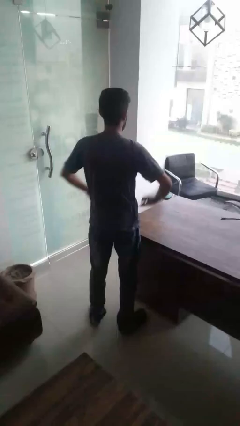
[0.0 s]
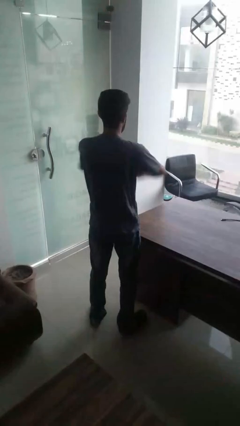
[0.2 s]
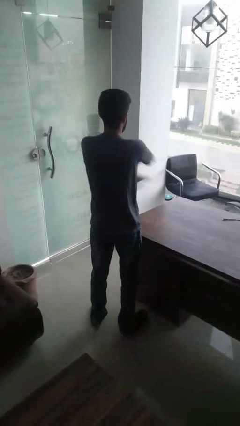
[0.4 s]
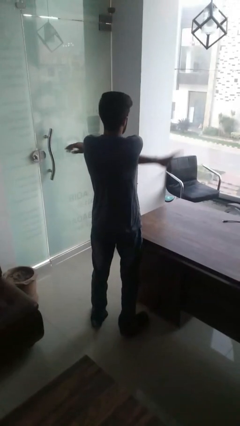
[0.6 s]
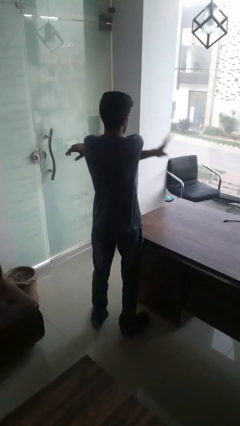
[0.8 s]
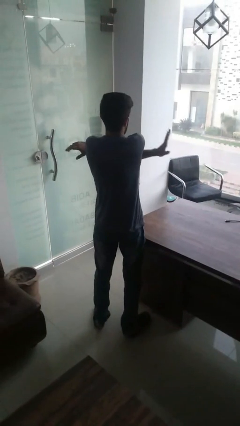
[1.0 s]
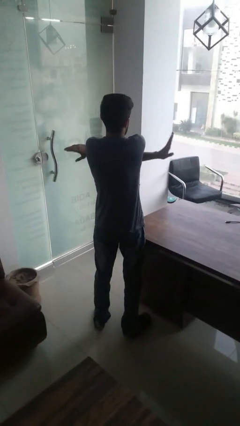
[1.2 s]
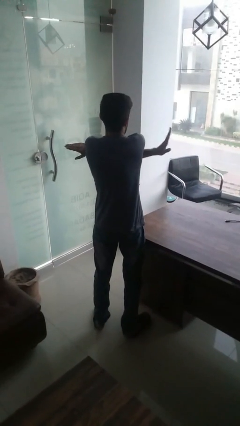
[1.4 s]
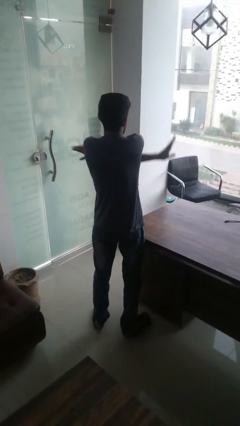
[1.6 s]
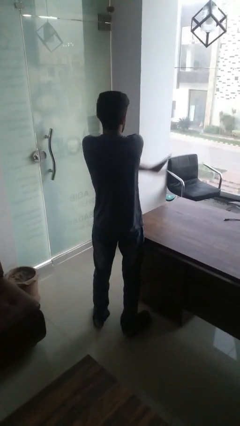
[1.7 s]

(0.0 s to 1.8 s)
person gestures arms x

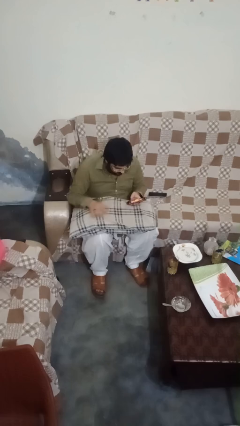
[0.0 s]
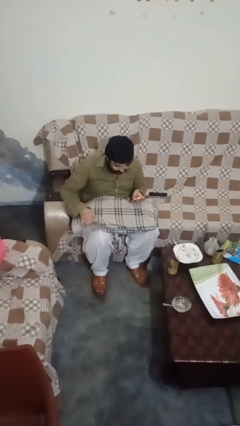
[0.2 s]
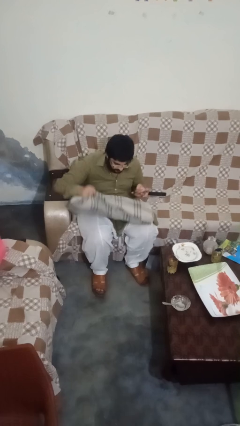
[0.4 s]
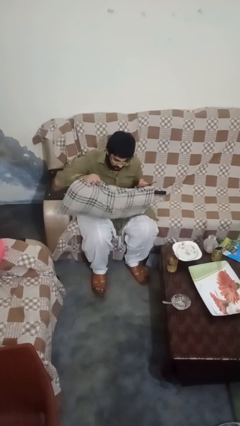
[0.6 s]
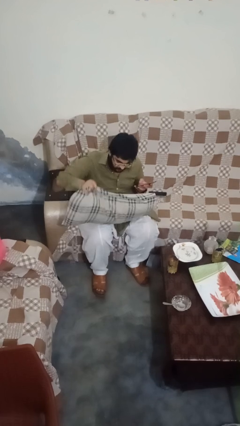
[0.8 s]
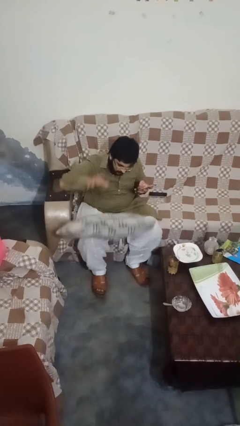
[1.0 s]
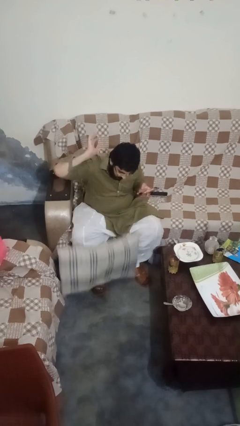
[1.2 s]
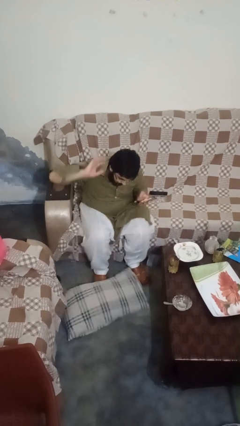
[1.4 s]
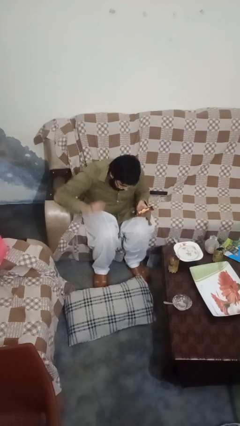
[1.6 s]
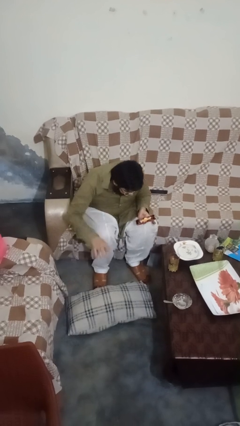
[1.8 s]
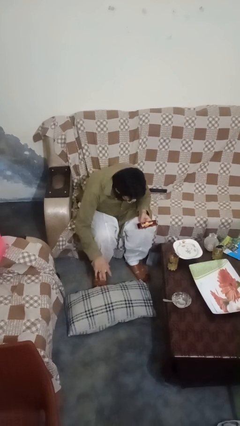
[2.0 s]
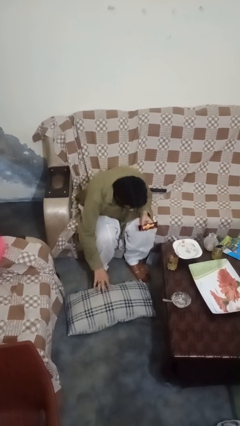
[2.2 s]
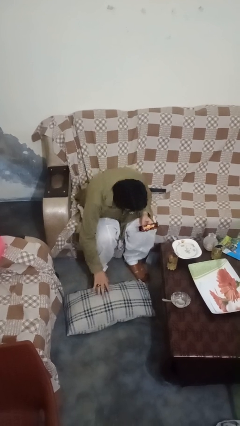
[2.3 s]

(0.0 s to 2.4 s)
person drops object

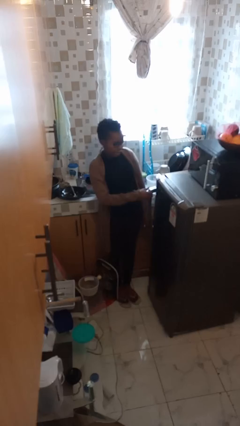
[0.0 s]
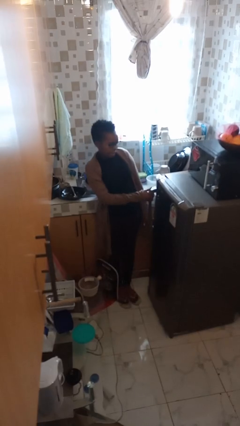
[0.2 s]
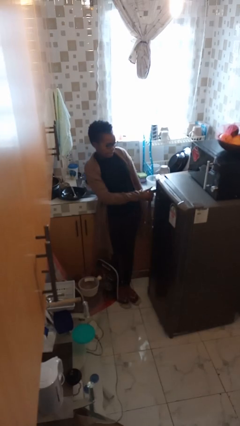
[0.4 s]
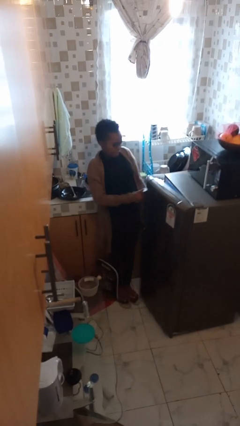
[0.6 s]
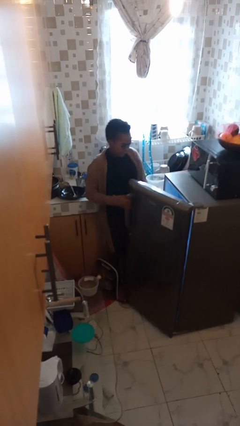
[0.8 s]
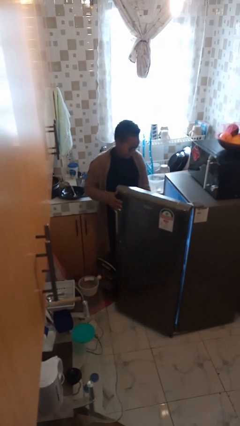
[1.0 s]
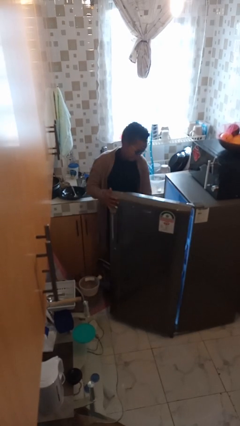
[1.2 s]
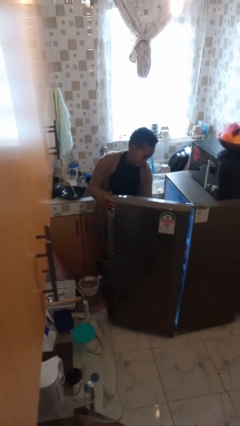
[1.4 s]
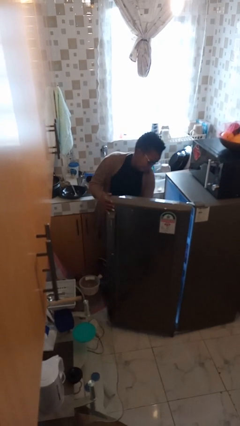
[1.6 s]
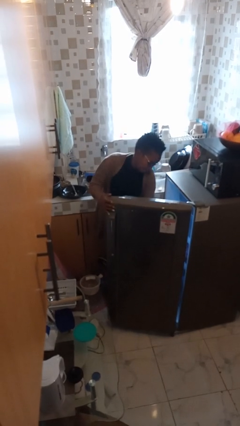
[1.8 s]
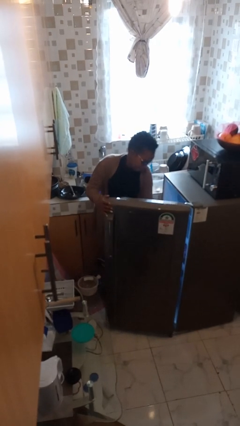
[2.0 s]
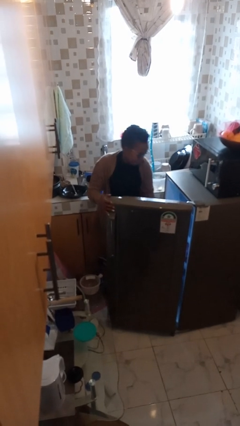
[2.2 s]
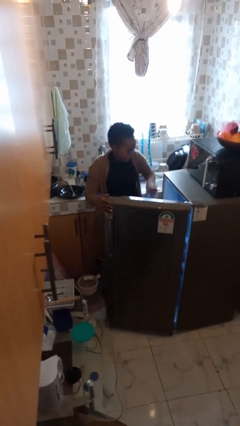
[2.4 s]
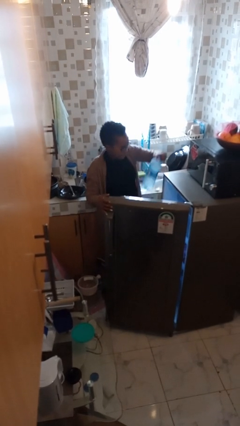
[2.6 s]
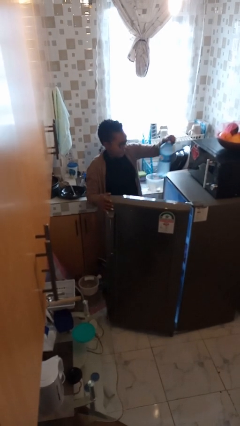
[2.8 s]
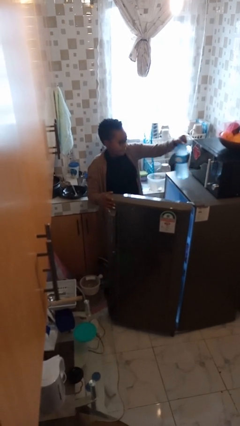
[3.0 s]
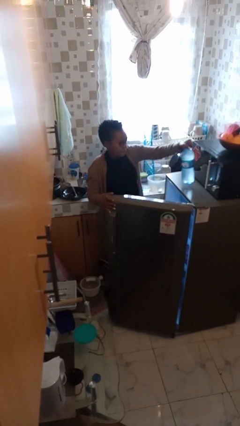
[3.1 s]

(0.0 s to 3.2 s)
person takes object from refrigerator

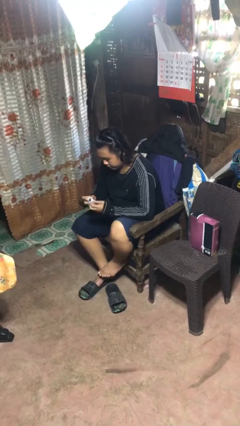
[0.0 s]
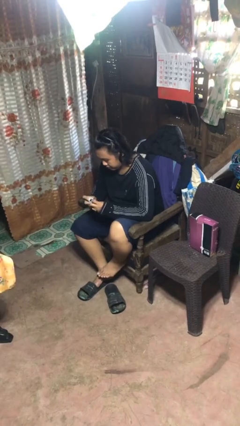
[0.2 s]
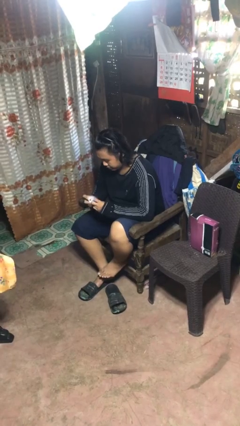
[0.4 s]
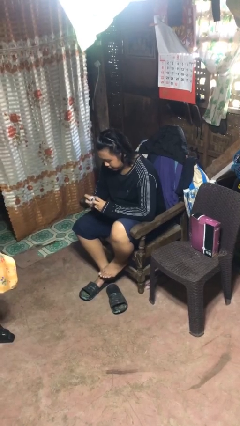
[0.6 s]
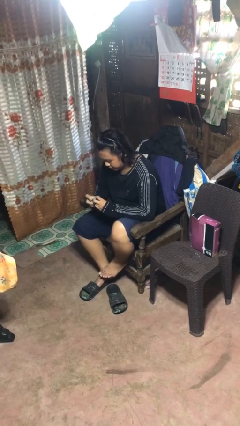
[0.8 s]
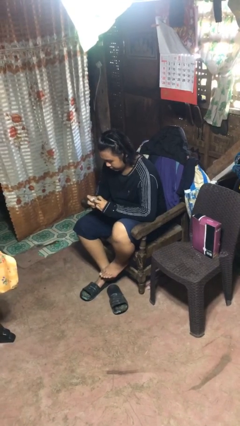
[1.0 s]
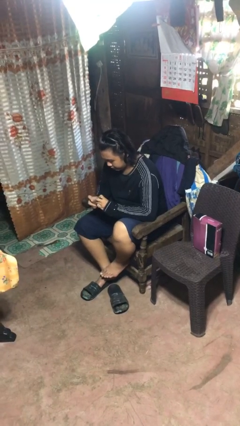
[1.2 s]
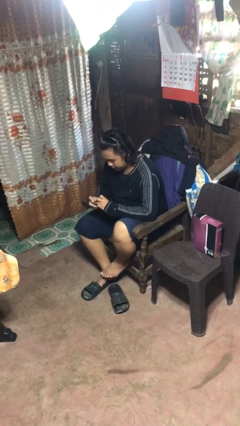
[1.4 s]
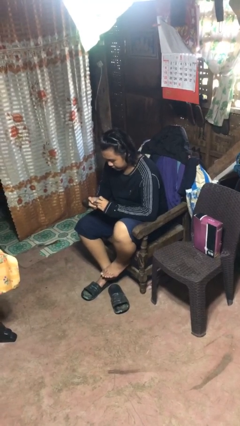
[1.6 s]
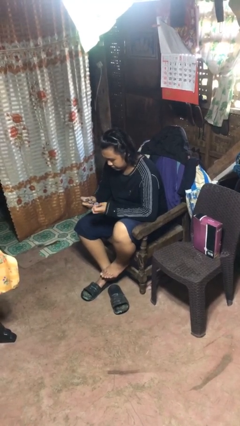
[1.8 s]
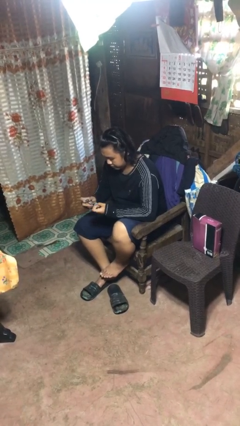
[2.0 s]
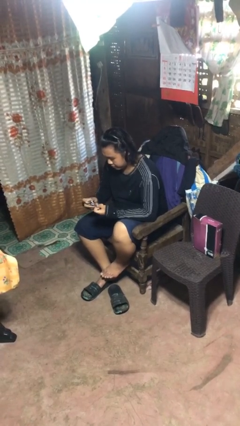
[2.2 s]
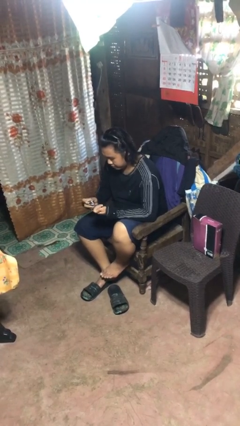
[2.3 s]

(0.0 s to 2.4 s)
person files fingernails

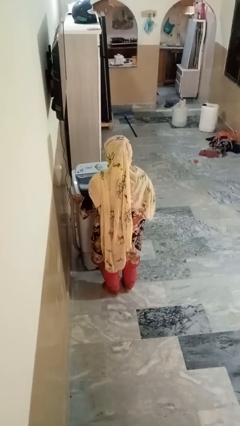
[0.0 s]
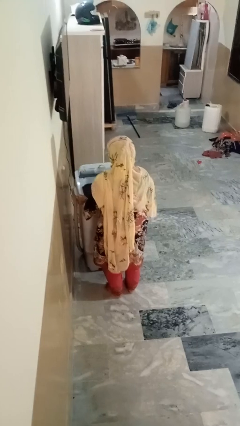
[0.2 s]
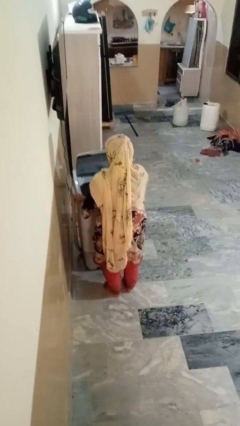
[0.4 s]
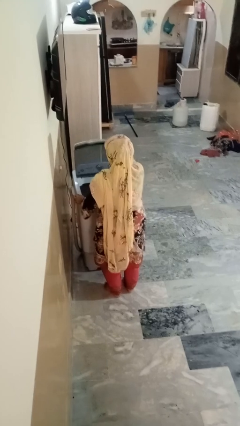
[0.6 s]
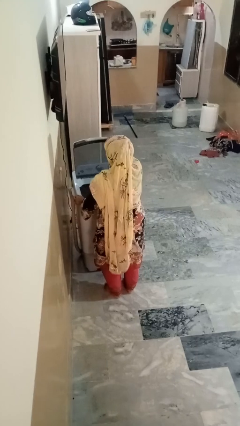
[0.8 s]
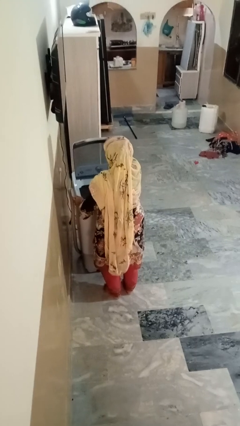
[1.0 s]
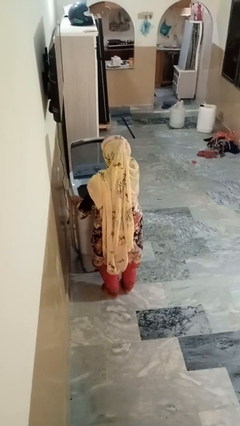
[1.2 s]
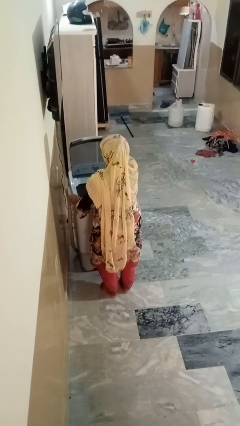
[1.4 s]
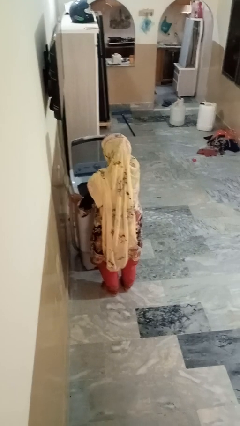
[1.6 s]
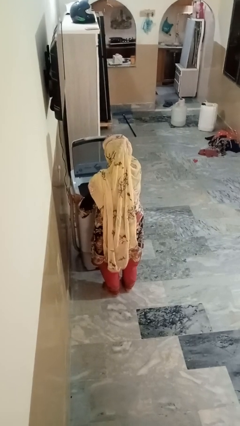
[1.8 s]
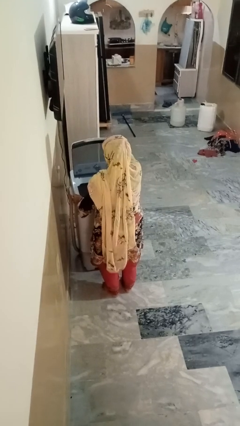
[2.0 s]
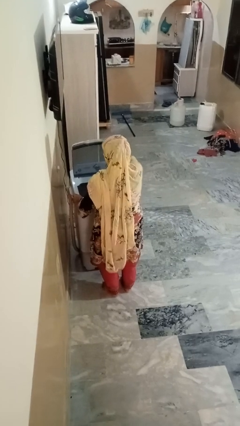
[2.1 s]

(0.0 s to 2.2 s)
person opens clothes washer

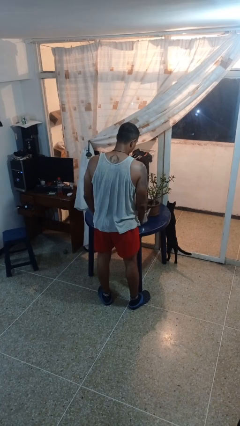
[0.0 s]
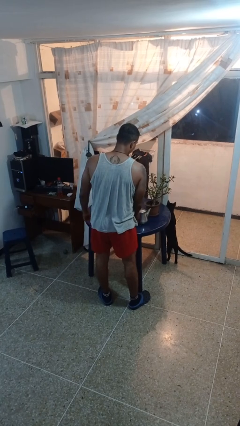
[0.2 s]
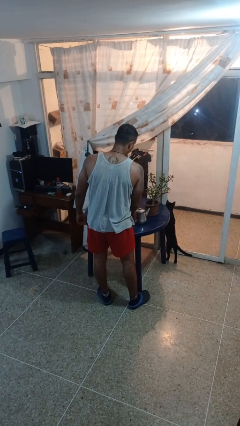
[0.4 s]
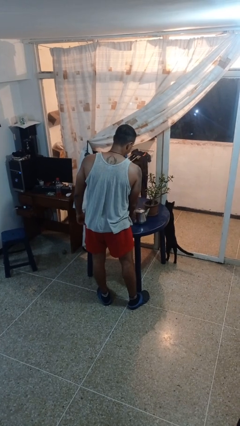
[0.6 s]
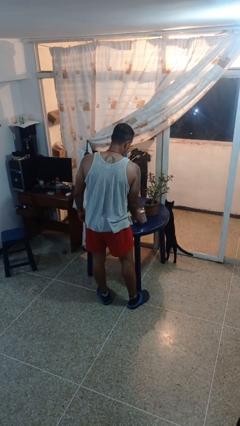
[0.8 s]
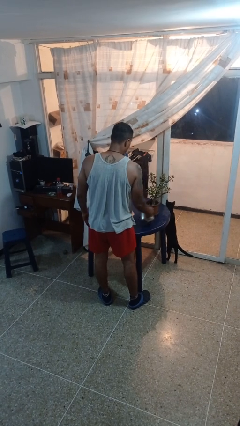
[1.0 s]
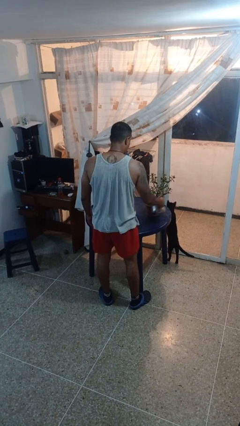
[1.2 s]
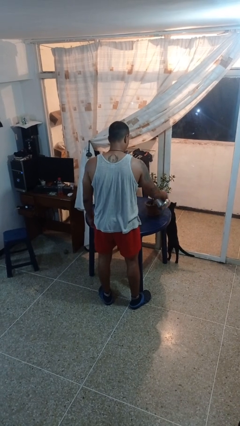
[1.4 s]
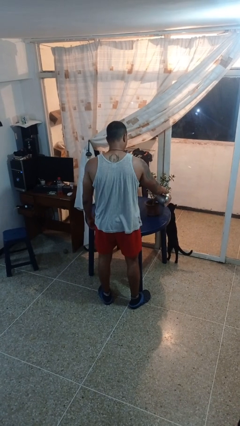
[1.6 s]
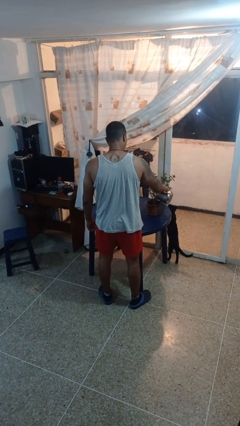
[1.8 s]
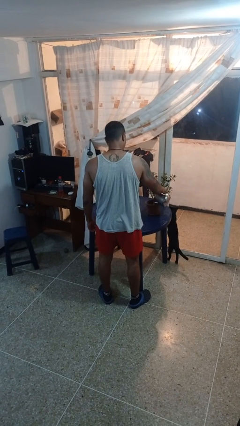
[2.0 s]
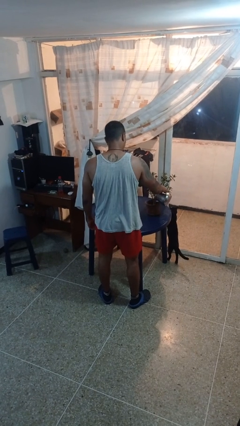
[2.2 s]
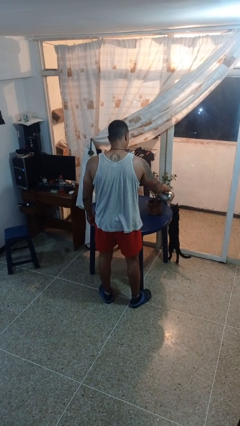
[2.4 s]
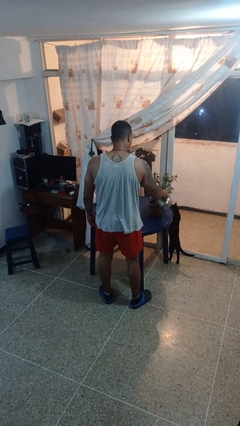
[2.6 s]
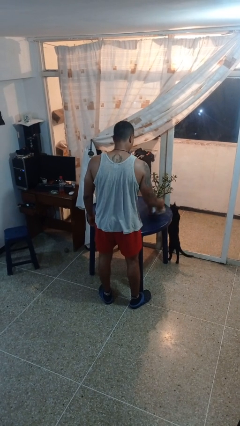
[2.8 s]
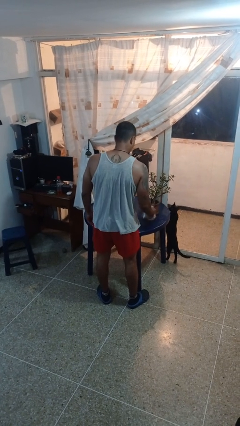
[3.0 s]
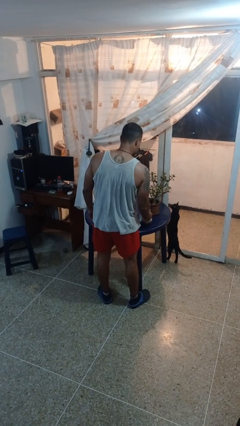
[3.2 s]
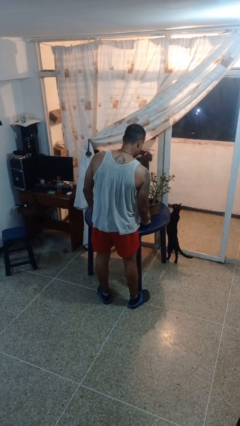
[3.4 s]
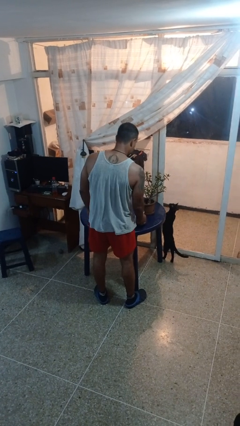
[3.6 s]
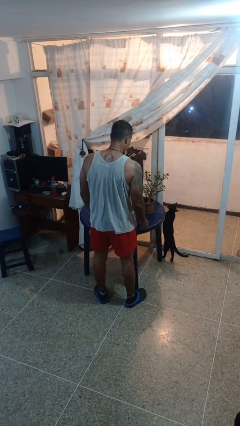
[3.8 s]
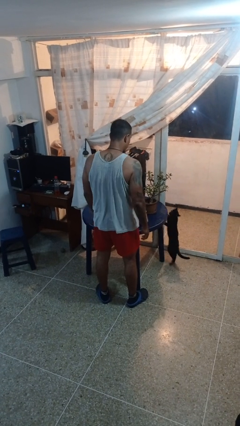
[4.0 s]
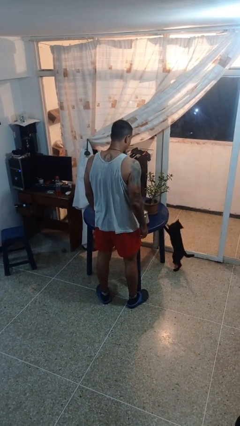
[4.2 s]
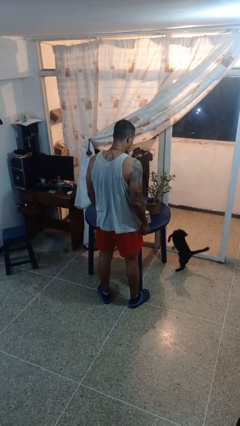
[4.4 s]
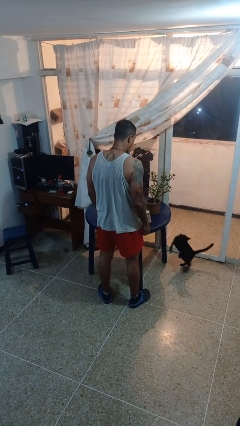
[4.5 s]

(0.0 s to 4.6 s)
person waters houseplant

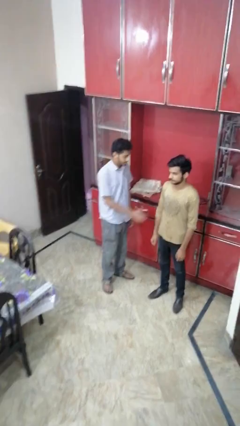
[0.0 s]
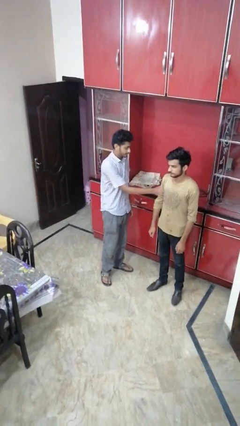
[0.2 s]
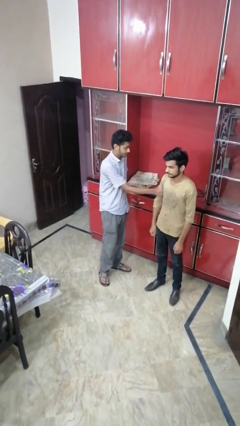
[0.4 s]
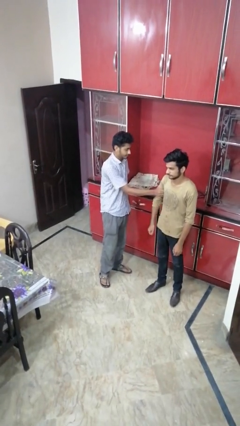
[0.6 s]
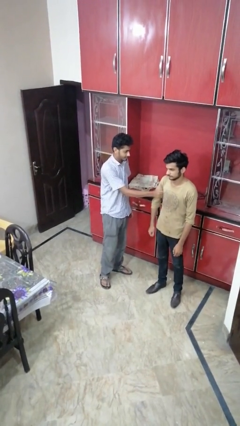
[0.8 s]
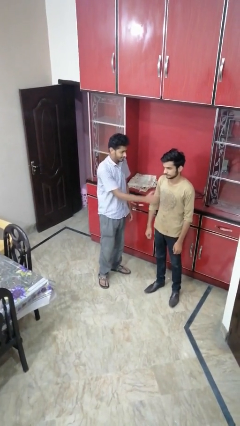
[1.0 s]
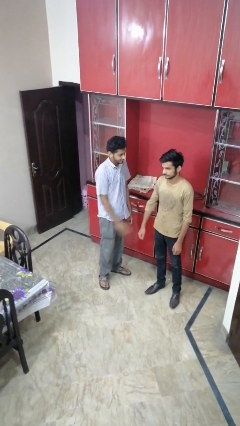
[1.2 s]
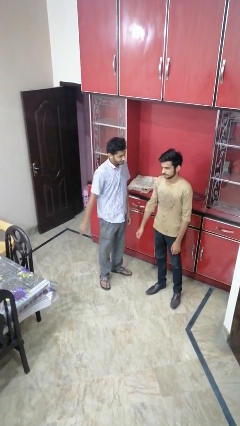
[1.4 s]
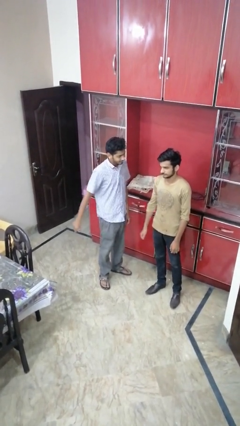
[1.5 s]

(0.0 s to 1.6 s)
person grabs person by bicep
